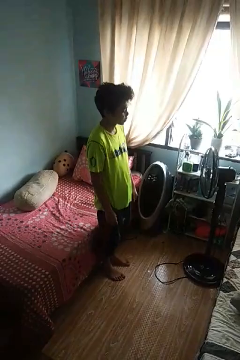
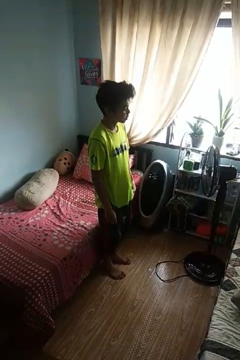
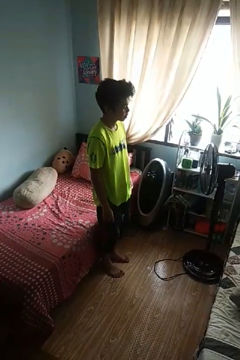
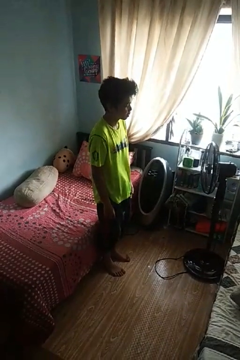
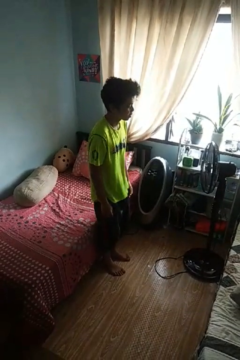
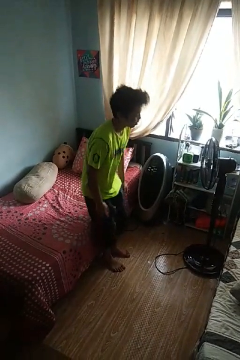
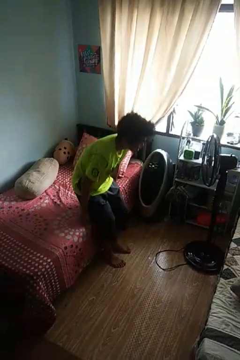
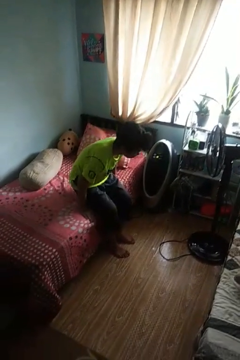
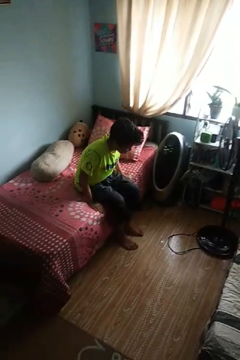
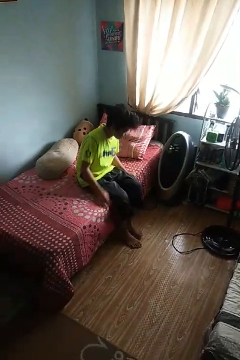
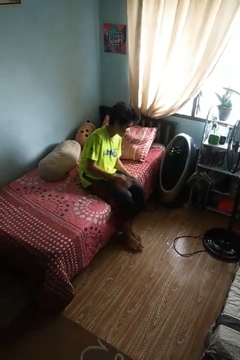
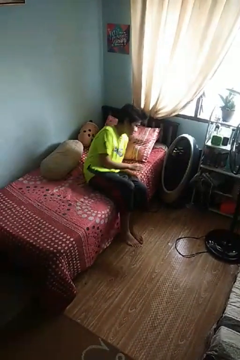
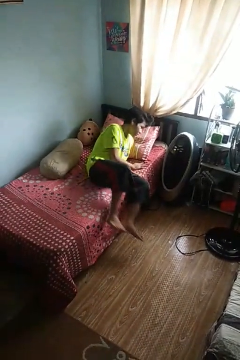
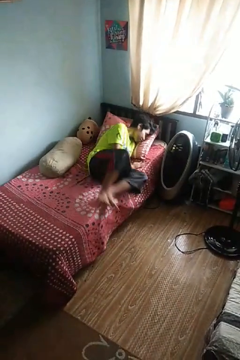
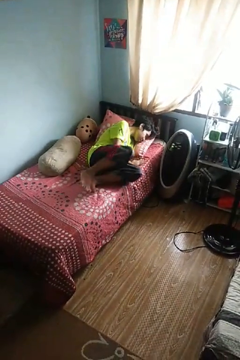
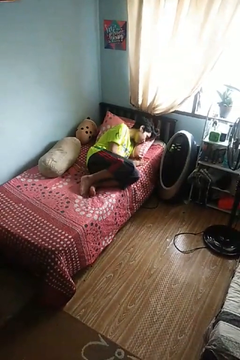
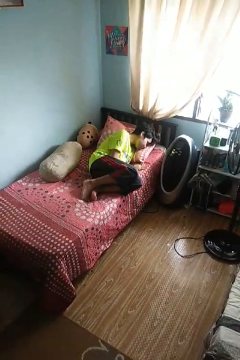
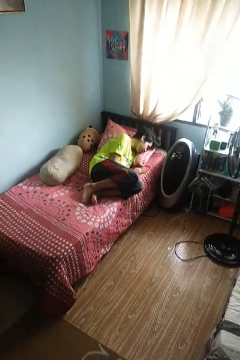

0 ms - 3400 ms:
person lies down on bed

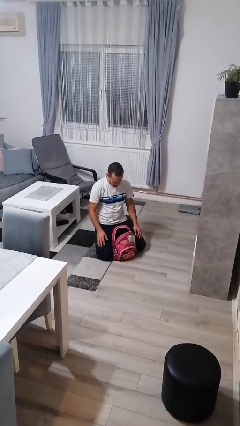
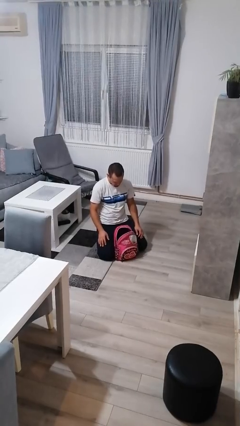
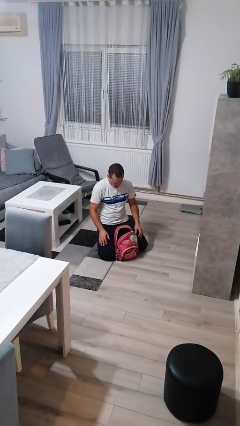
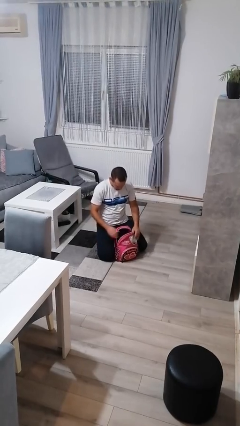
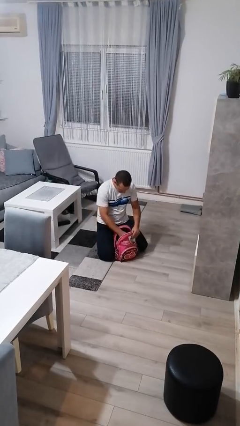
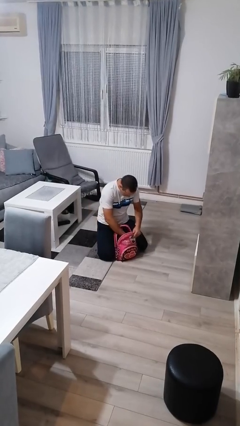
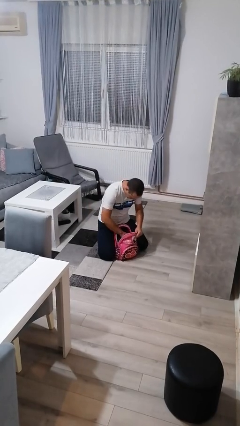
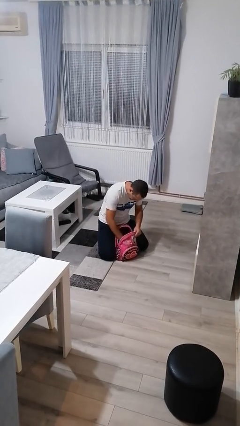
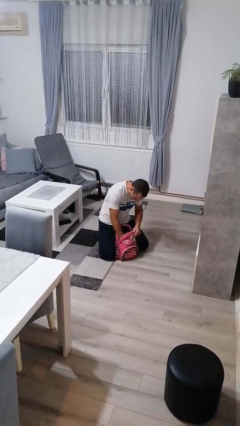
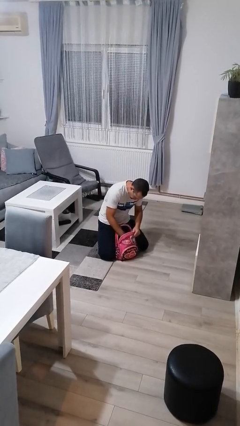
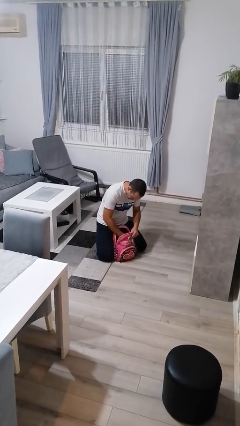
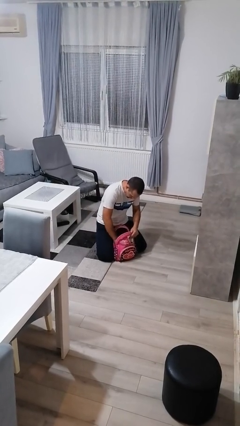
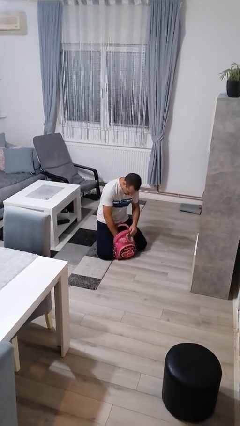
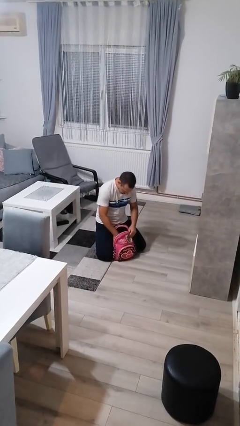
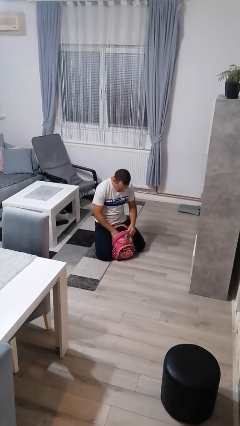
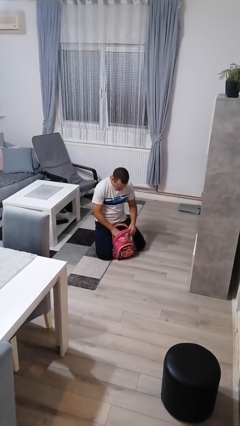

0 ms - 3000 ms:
person searches in bag

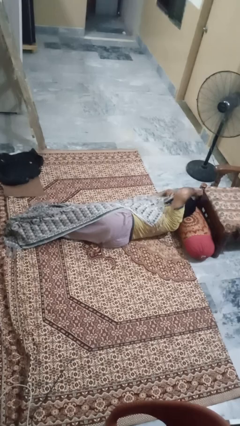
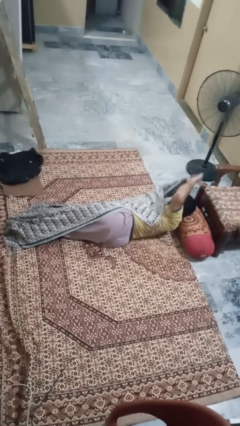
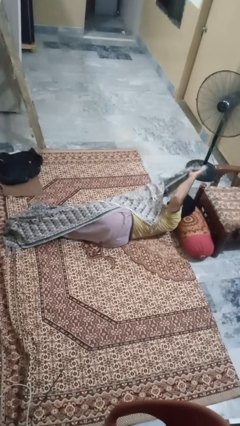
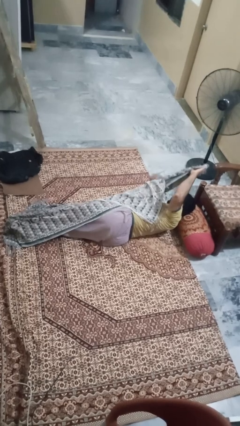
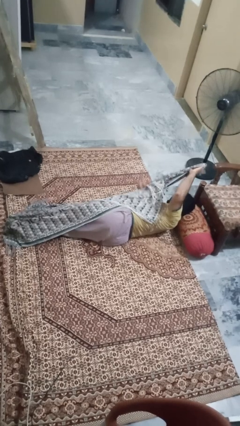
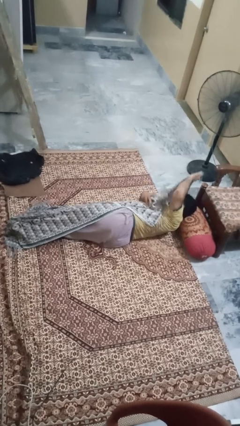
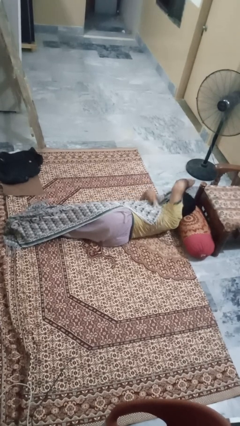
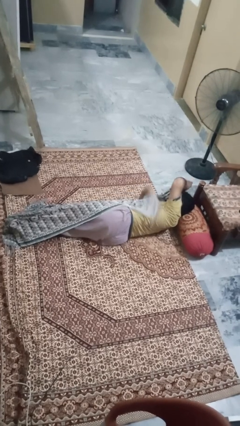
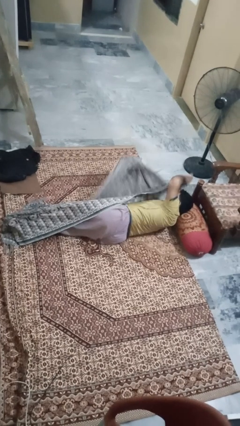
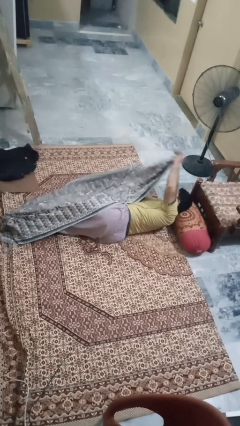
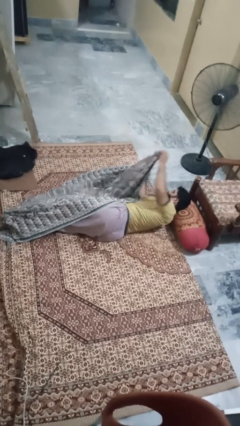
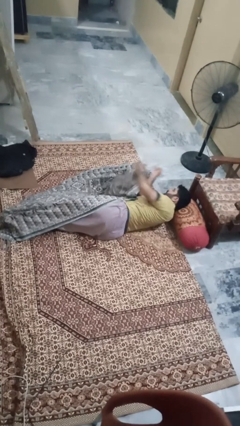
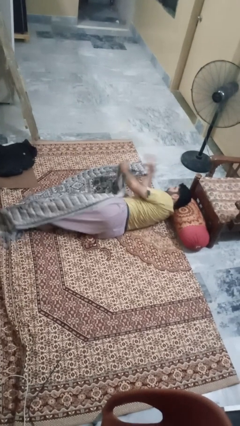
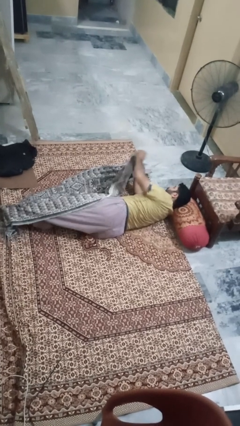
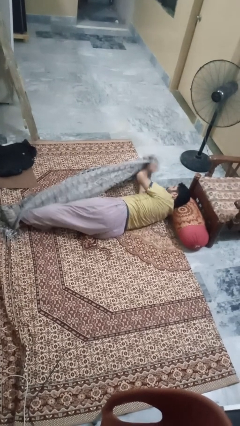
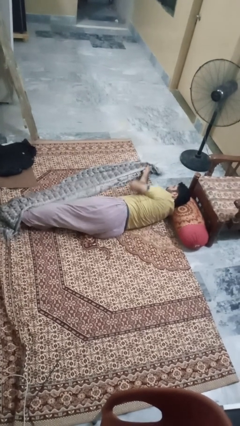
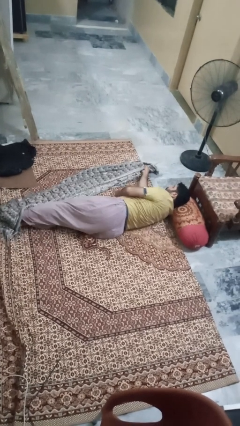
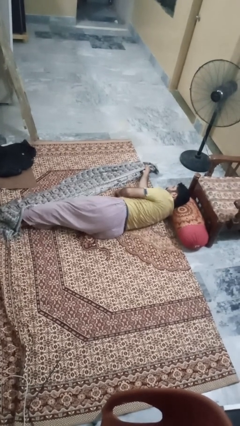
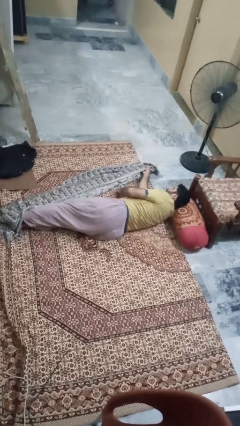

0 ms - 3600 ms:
person uncovers with blanket

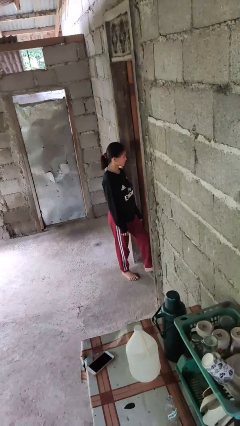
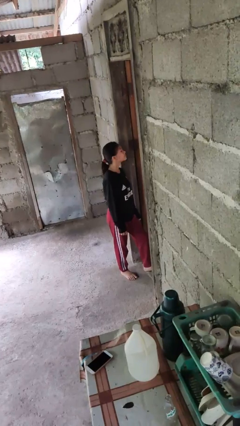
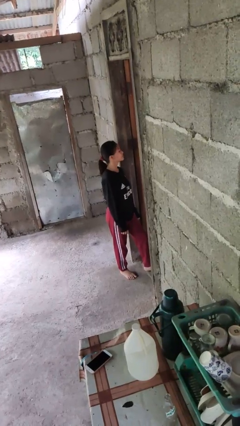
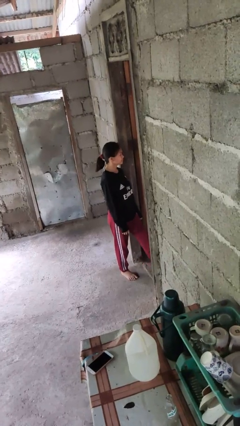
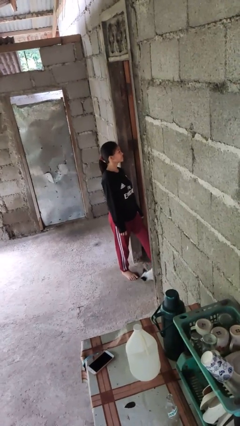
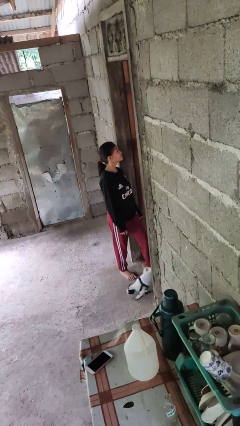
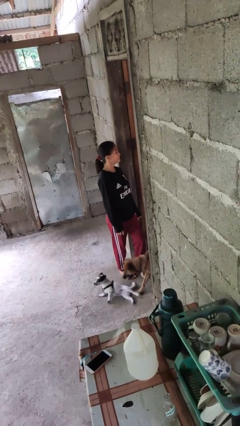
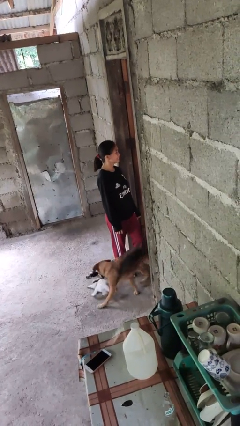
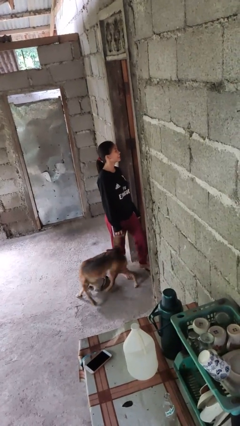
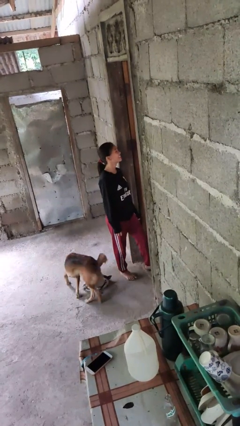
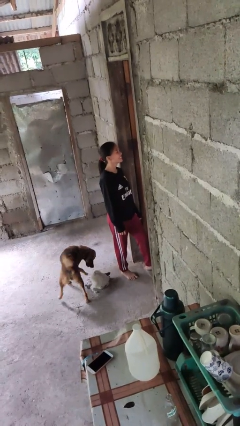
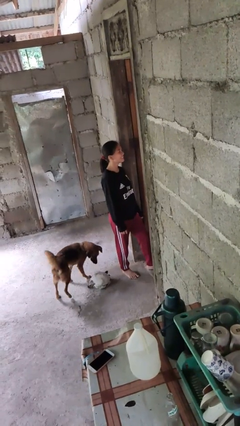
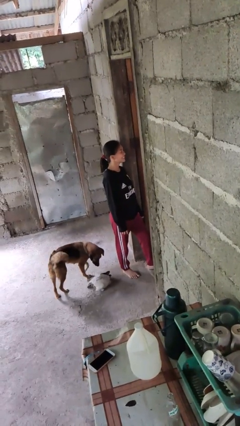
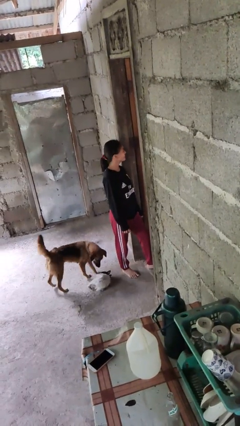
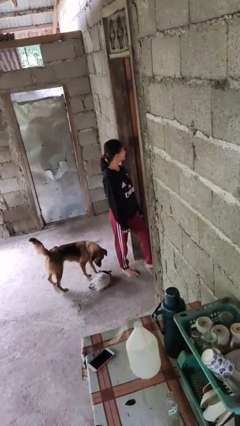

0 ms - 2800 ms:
person nods head

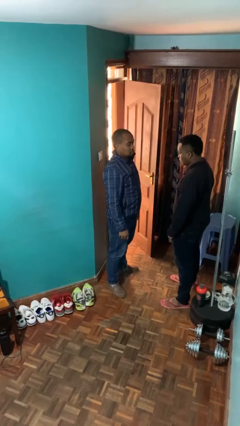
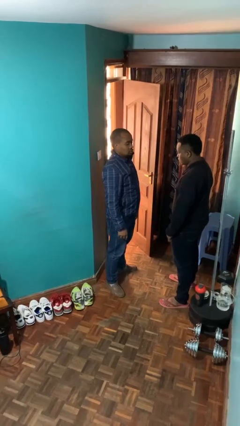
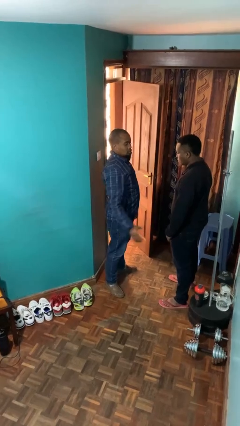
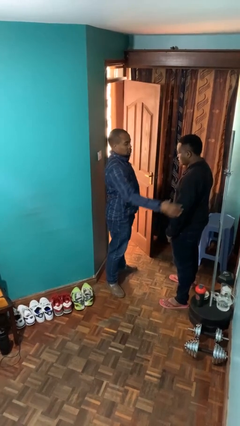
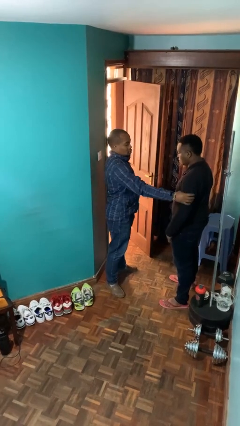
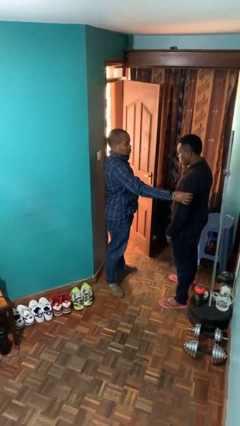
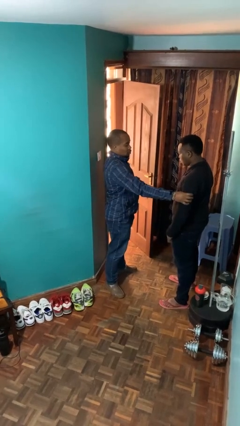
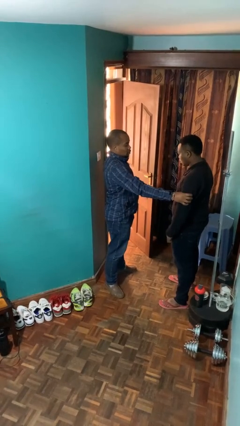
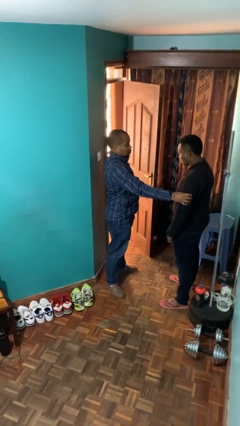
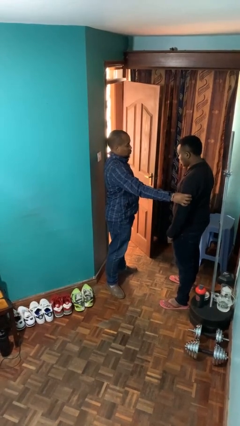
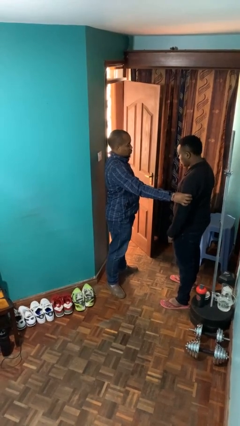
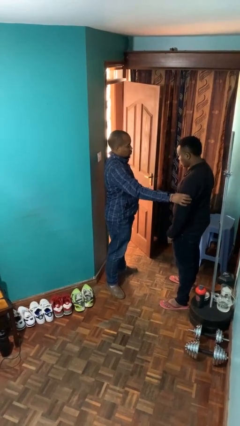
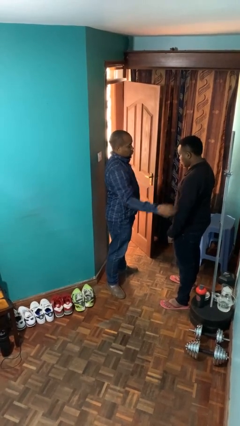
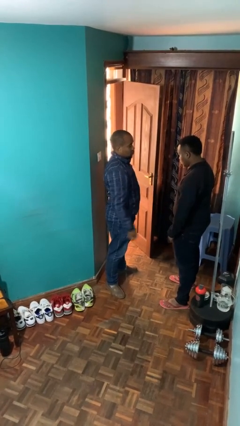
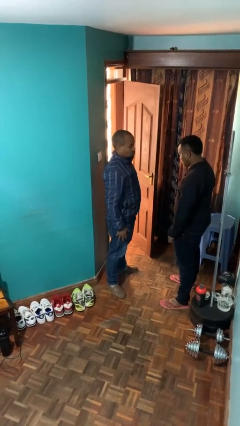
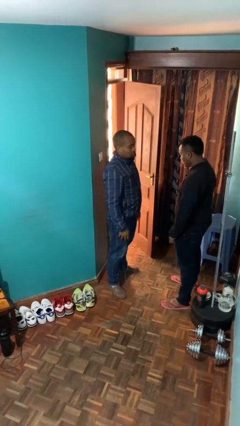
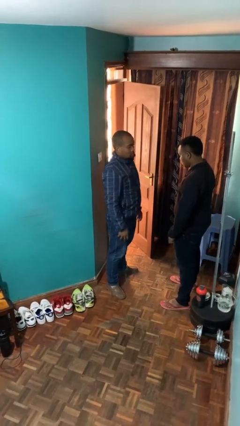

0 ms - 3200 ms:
person grabs person by bicep

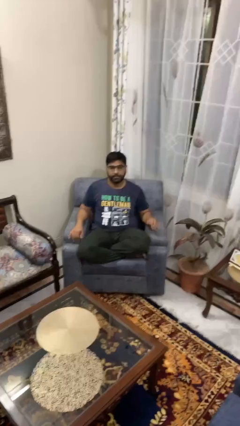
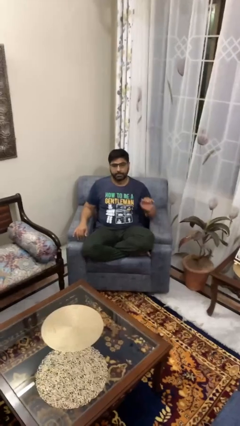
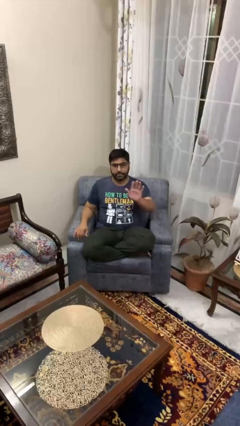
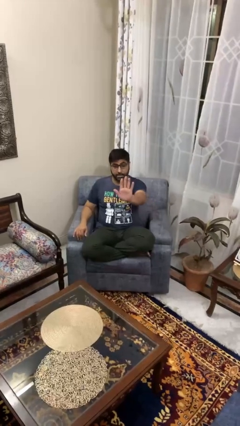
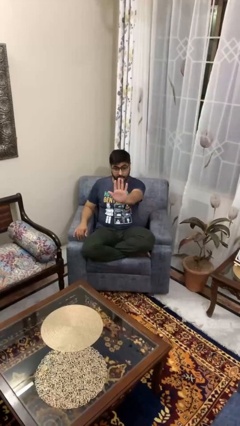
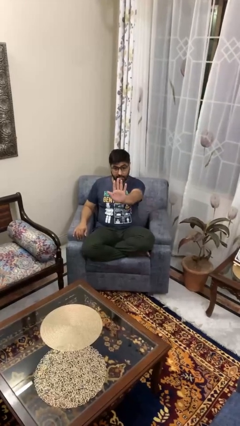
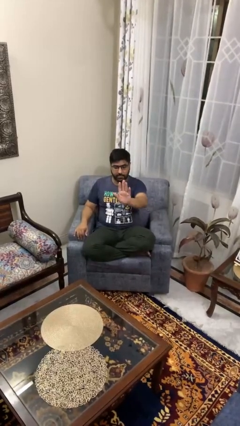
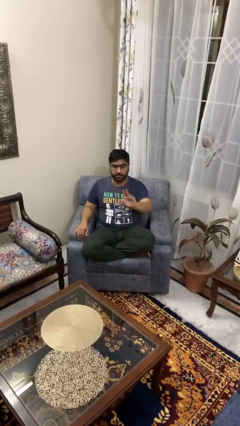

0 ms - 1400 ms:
person gestures stop
